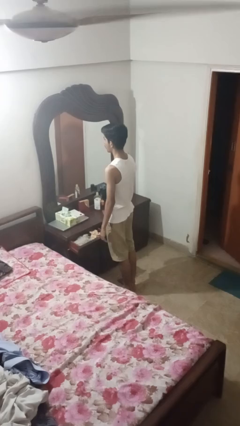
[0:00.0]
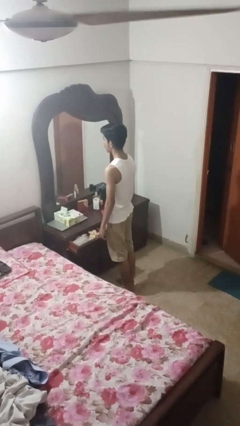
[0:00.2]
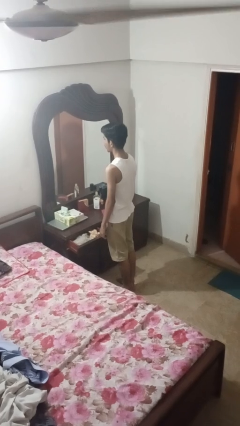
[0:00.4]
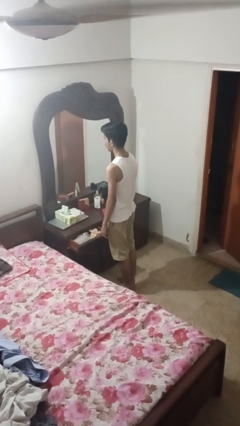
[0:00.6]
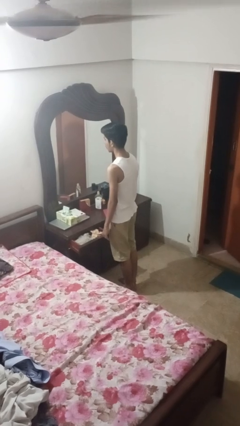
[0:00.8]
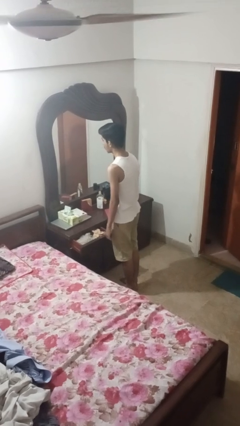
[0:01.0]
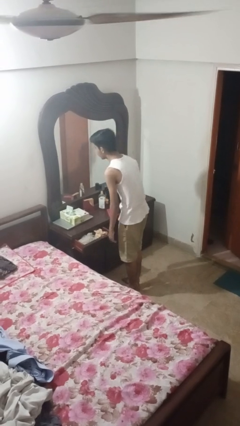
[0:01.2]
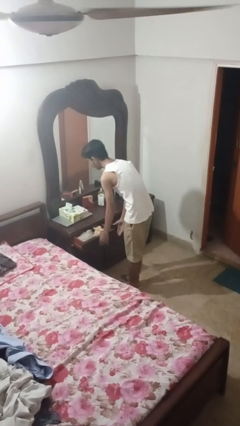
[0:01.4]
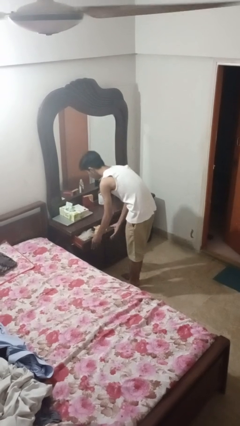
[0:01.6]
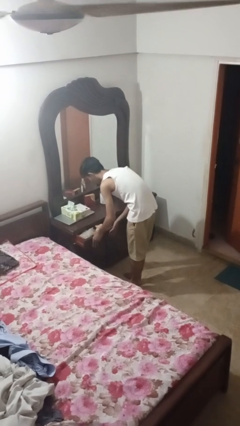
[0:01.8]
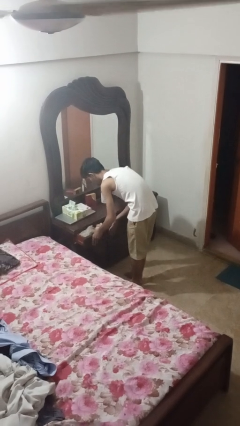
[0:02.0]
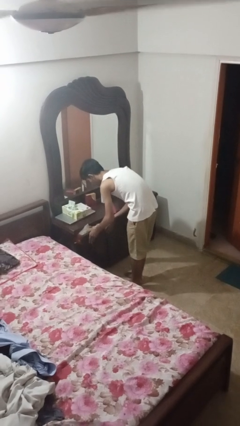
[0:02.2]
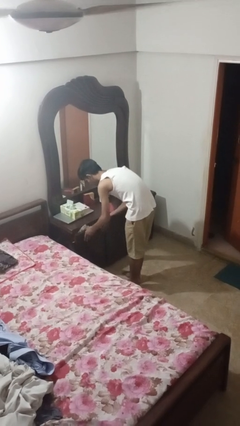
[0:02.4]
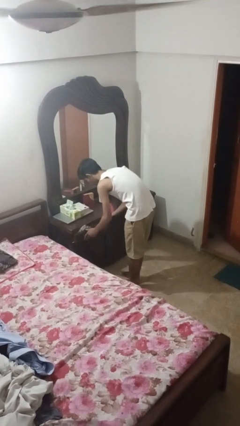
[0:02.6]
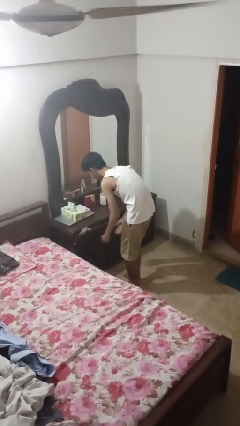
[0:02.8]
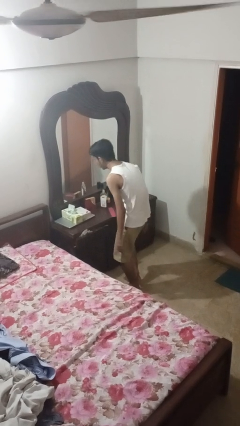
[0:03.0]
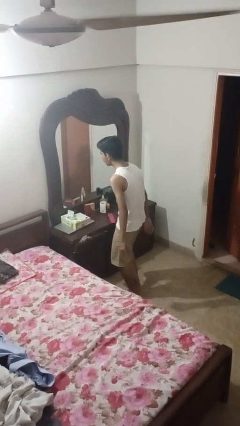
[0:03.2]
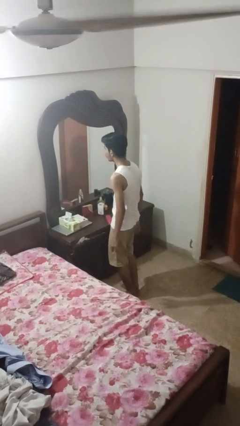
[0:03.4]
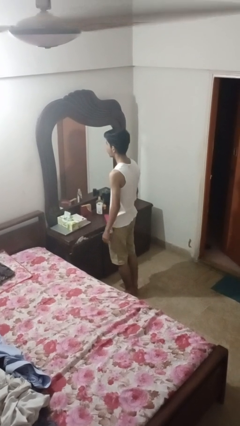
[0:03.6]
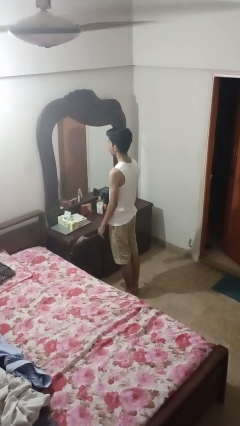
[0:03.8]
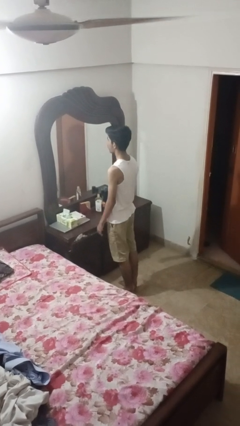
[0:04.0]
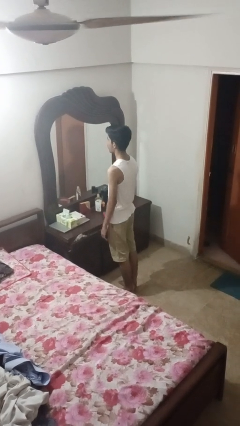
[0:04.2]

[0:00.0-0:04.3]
person closes dresser drawer

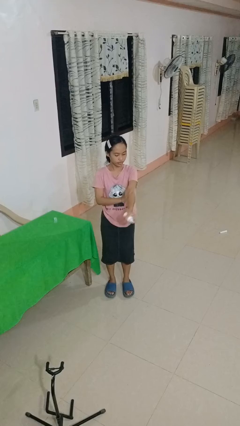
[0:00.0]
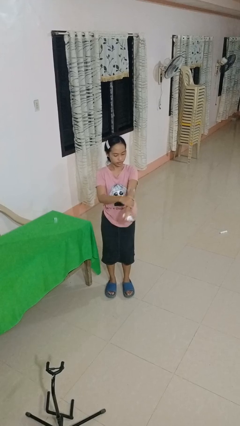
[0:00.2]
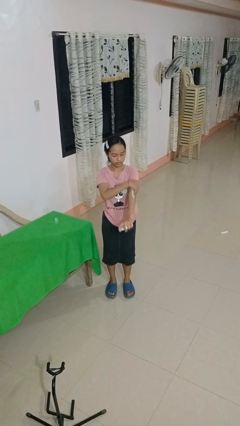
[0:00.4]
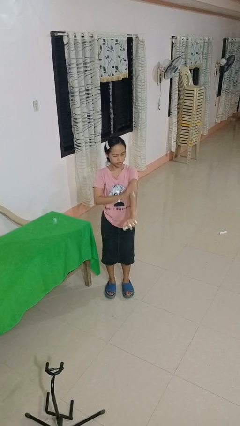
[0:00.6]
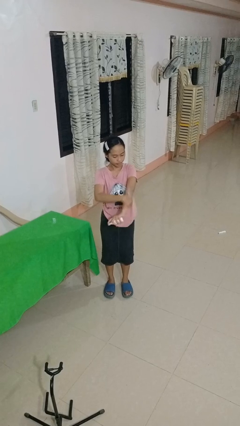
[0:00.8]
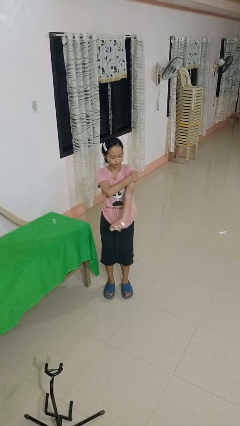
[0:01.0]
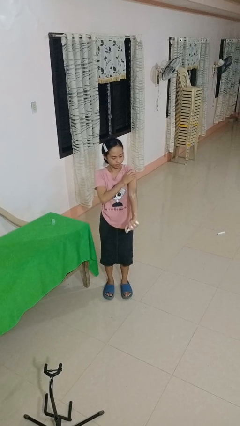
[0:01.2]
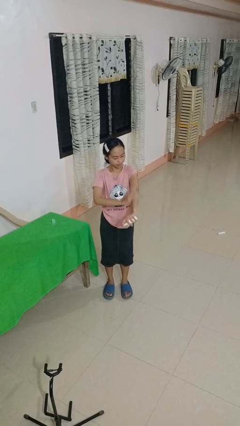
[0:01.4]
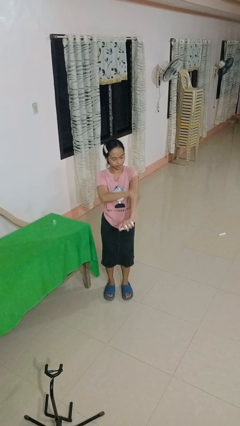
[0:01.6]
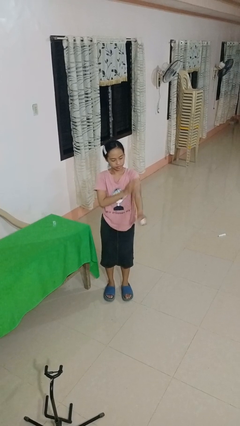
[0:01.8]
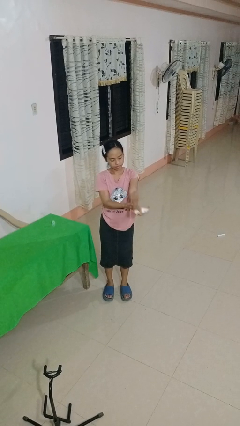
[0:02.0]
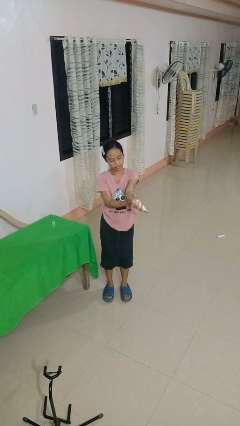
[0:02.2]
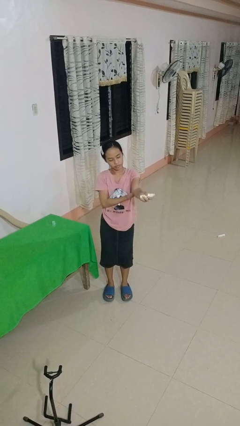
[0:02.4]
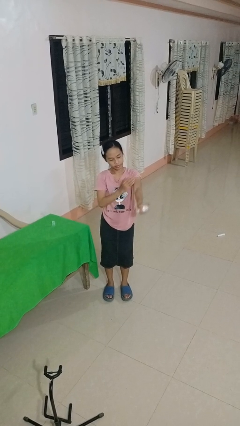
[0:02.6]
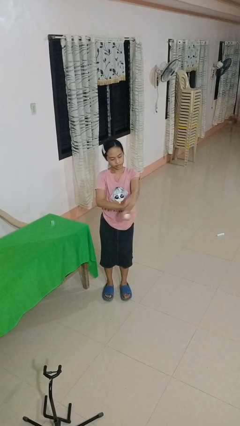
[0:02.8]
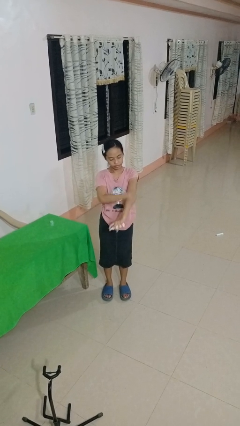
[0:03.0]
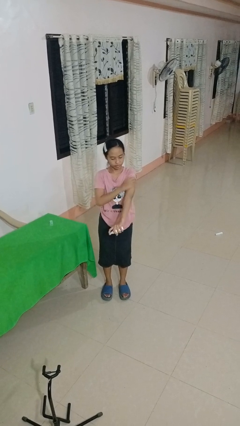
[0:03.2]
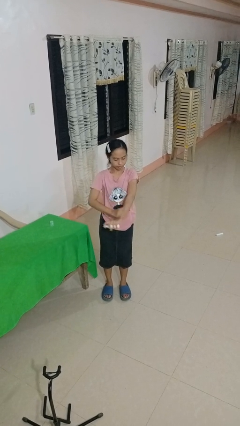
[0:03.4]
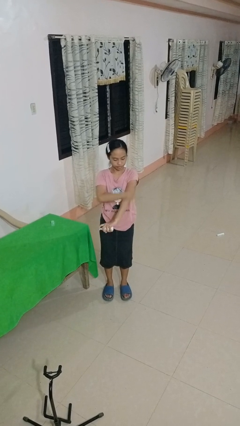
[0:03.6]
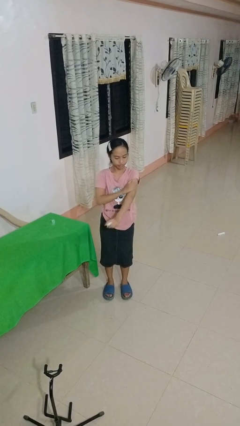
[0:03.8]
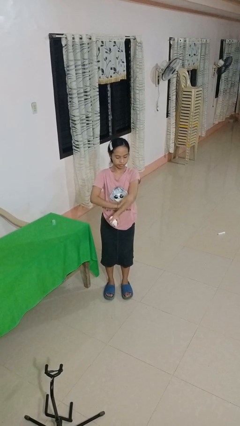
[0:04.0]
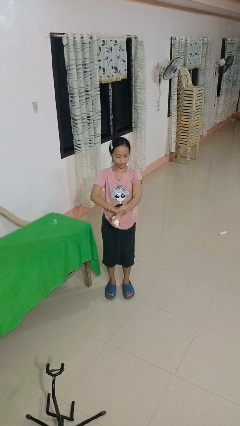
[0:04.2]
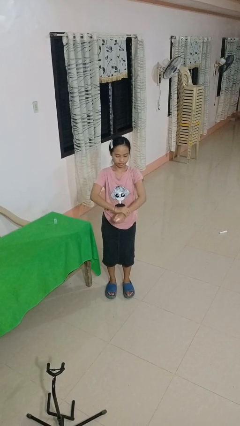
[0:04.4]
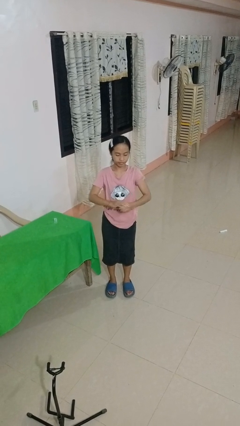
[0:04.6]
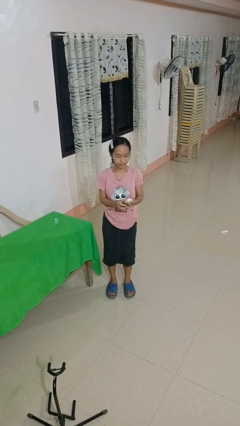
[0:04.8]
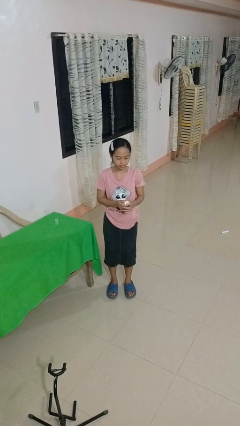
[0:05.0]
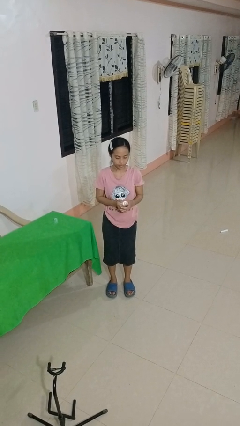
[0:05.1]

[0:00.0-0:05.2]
person applies sunscreen

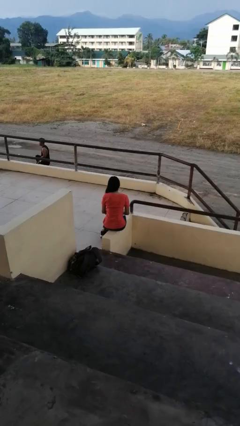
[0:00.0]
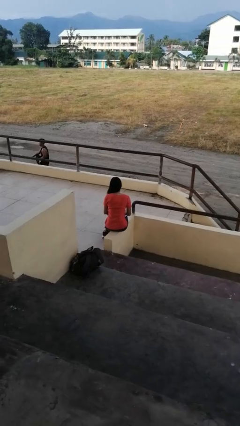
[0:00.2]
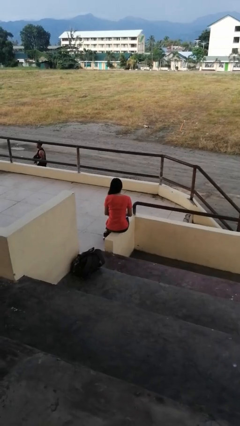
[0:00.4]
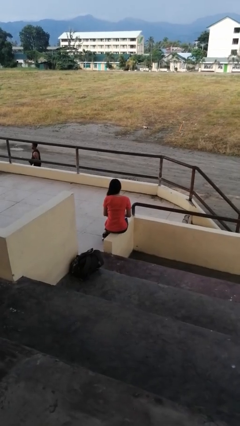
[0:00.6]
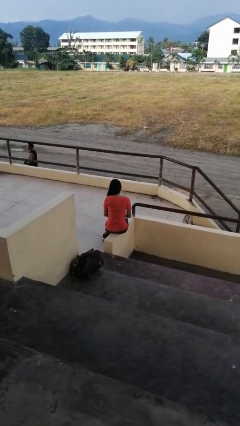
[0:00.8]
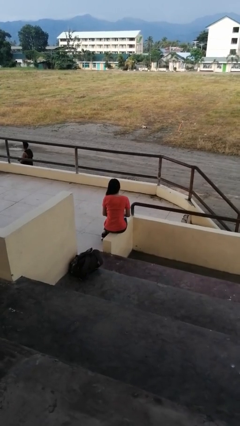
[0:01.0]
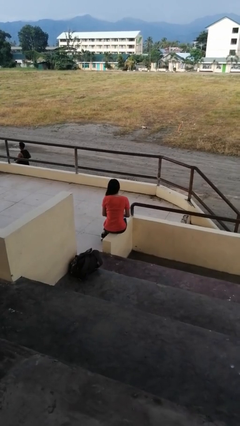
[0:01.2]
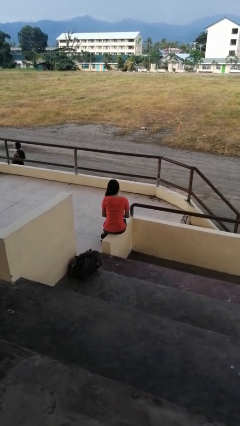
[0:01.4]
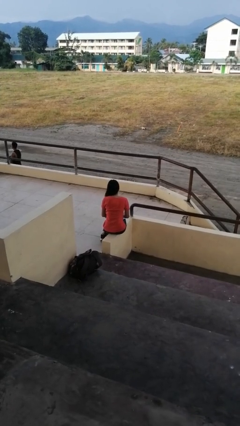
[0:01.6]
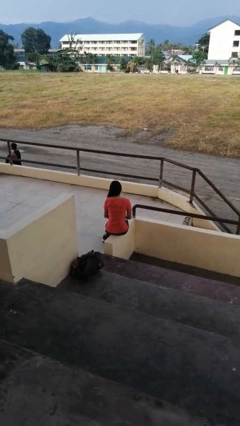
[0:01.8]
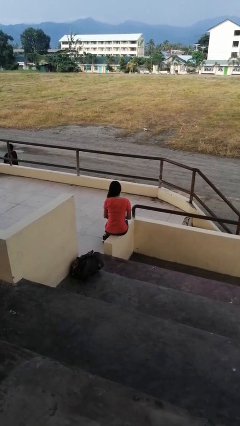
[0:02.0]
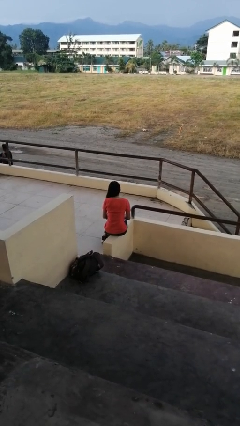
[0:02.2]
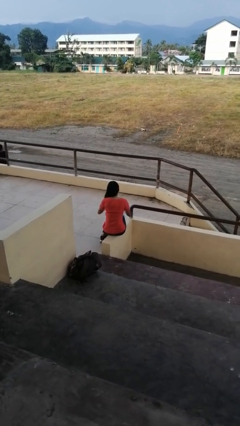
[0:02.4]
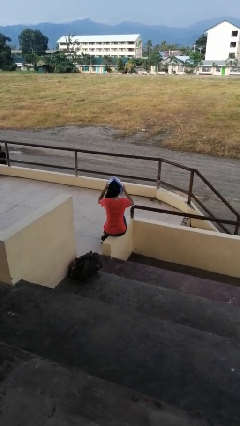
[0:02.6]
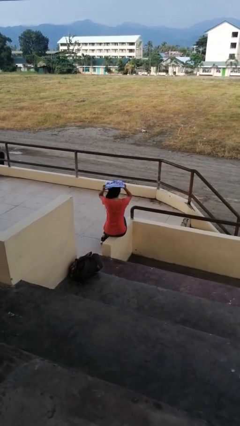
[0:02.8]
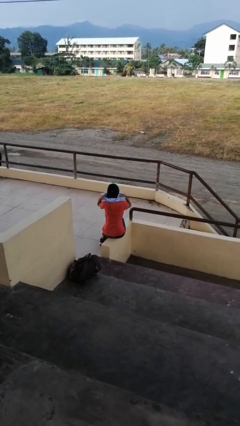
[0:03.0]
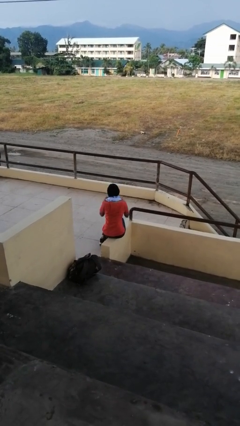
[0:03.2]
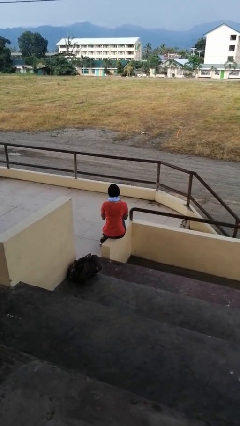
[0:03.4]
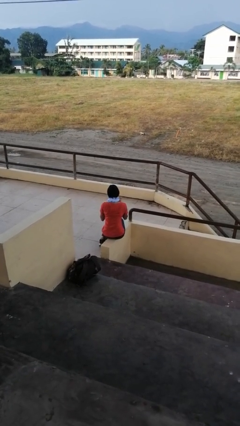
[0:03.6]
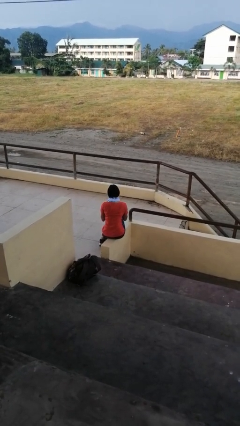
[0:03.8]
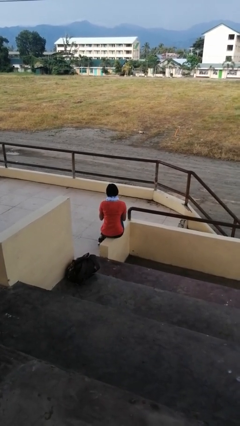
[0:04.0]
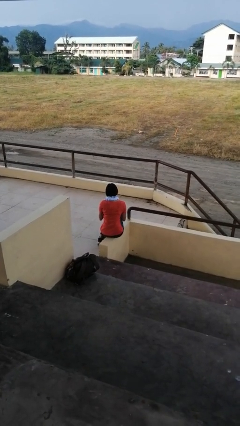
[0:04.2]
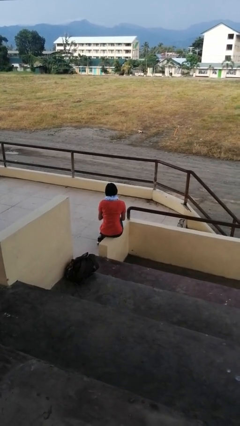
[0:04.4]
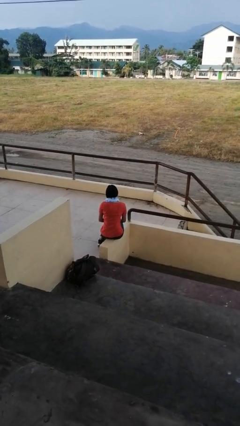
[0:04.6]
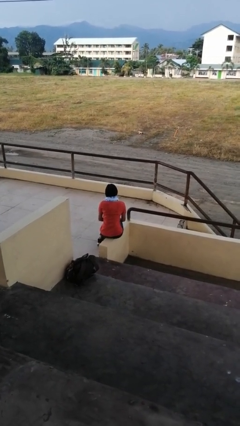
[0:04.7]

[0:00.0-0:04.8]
person puts on scarf

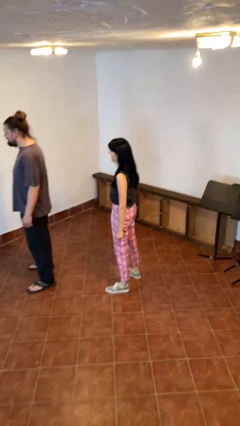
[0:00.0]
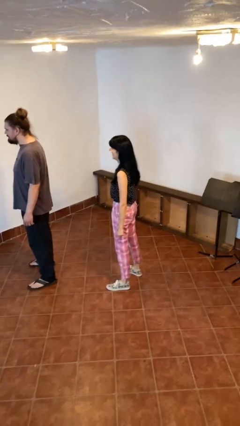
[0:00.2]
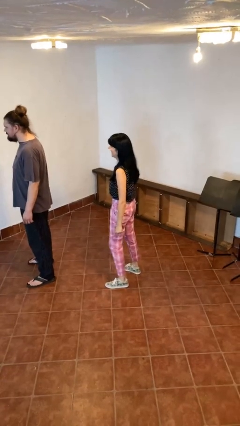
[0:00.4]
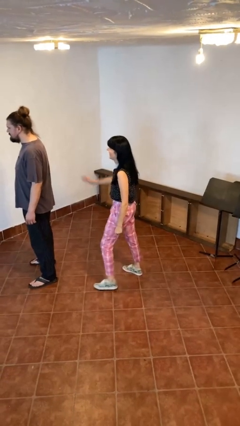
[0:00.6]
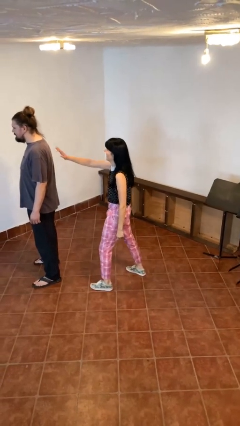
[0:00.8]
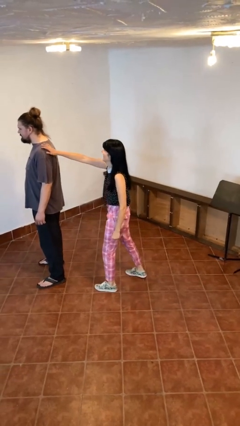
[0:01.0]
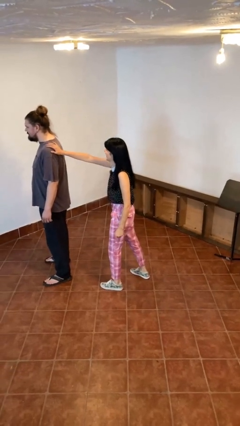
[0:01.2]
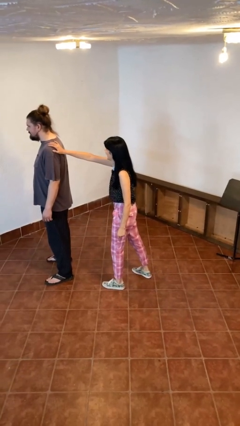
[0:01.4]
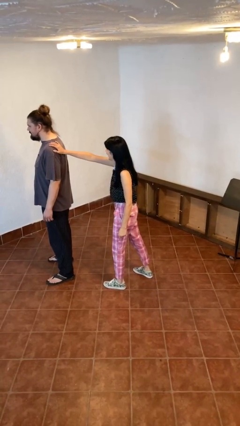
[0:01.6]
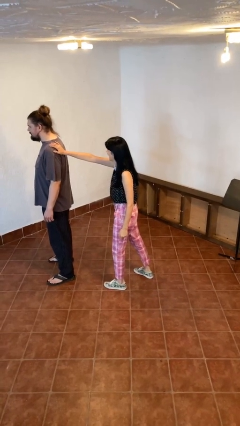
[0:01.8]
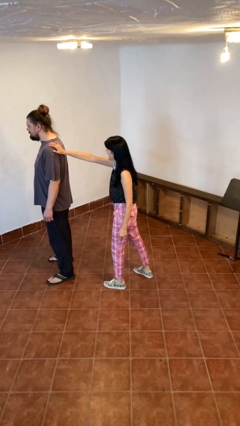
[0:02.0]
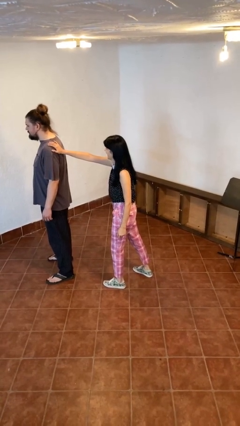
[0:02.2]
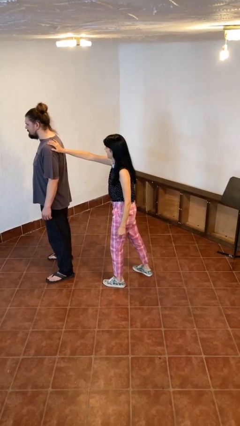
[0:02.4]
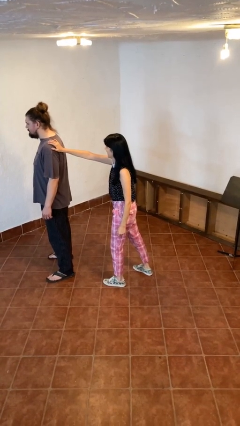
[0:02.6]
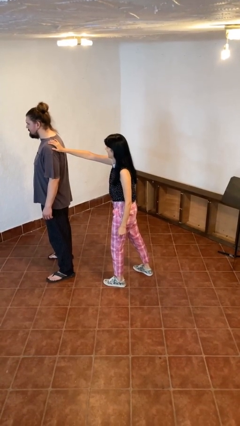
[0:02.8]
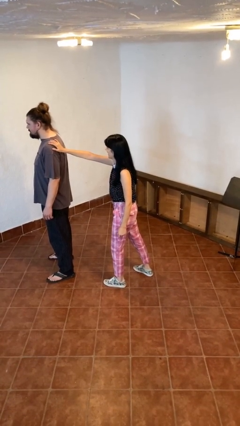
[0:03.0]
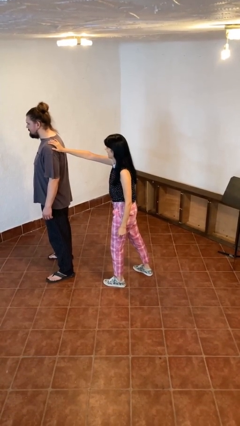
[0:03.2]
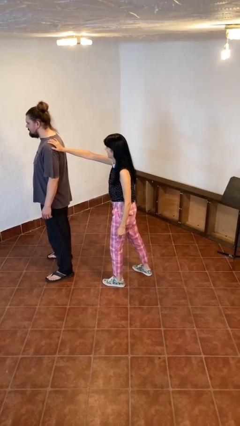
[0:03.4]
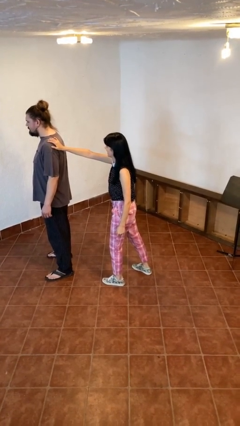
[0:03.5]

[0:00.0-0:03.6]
person grabs person by shoulder
